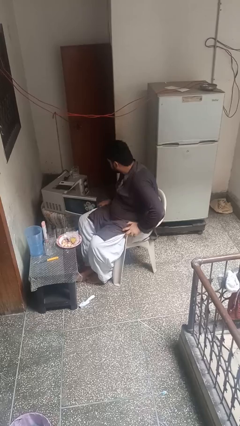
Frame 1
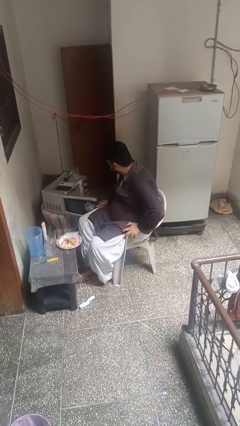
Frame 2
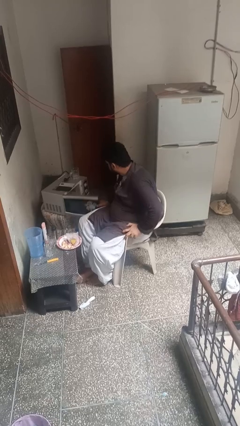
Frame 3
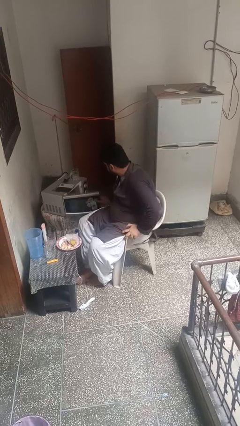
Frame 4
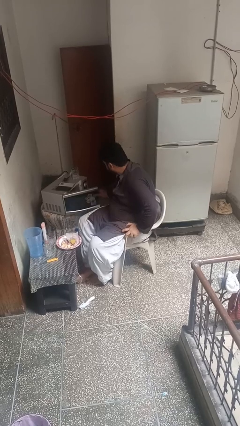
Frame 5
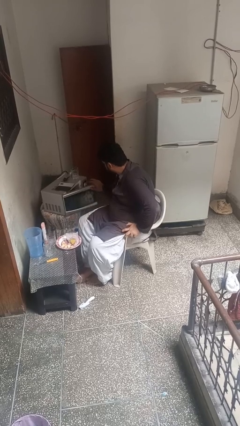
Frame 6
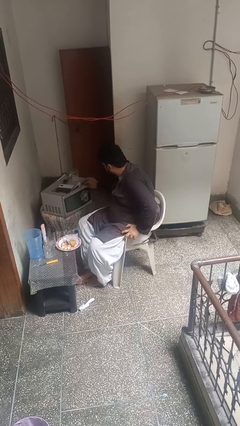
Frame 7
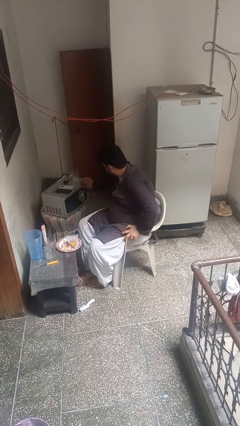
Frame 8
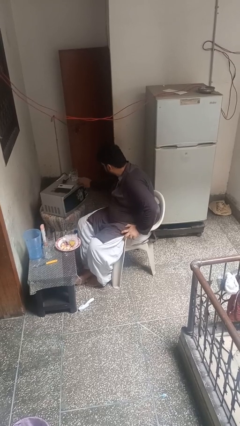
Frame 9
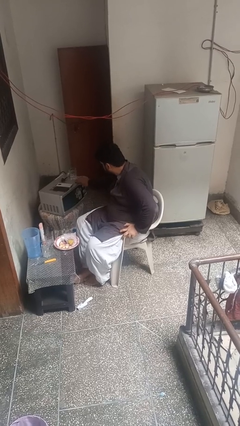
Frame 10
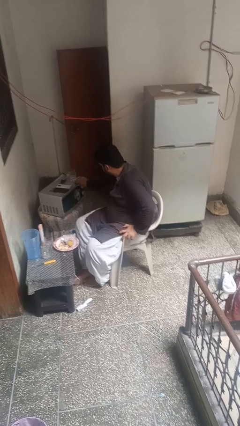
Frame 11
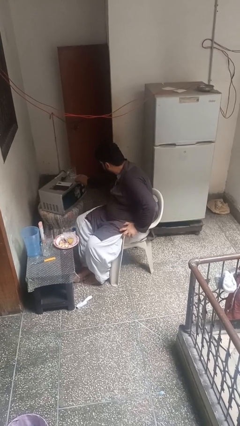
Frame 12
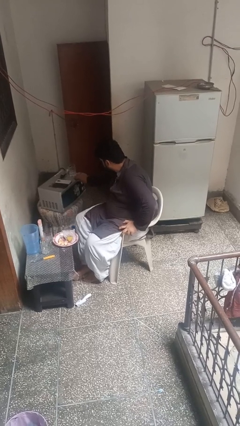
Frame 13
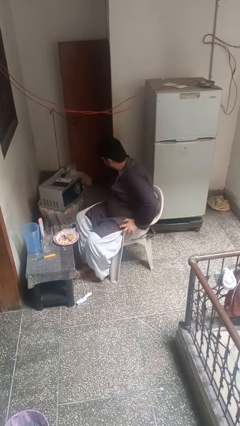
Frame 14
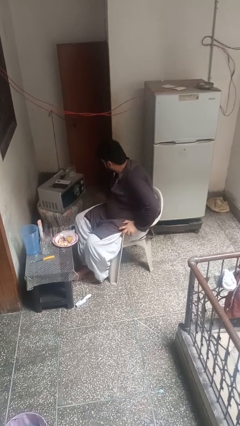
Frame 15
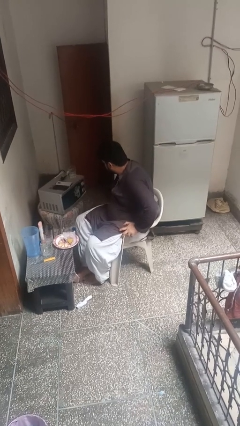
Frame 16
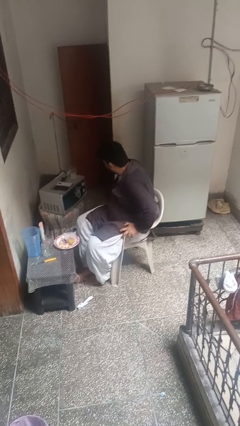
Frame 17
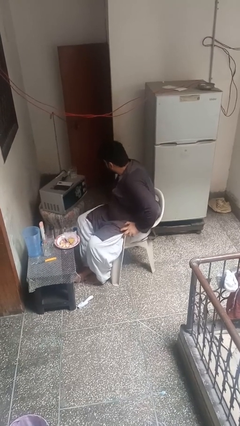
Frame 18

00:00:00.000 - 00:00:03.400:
person closes microwave

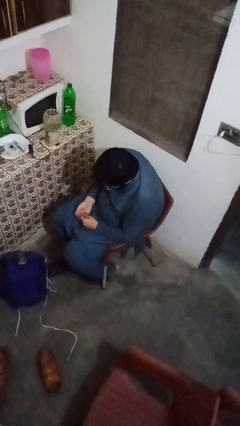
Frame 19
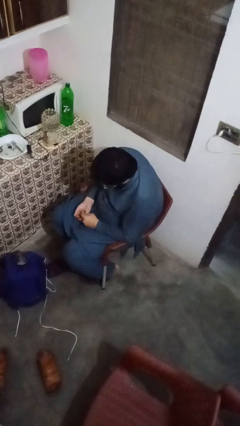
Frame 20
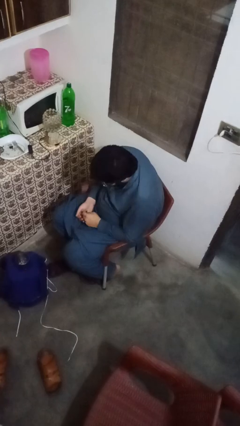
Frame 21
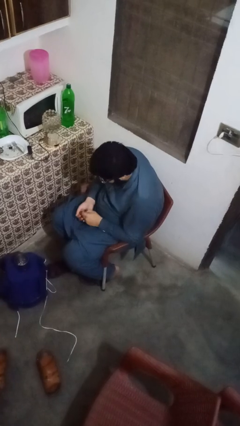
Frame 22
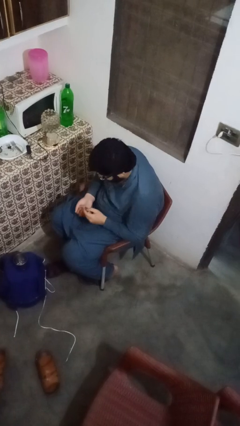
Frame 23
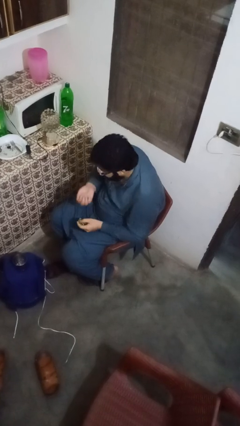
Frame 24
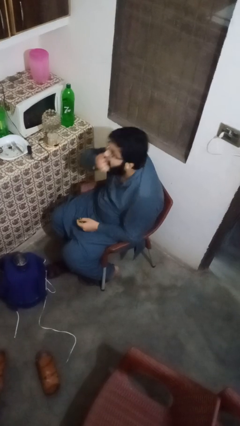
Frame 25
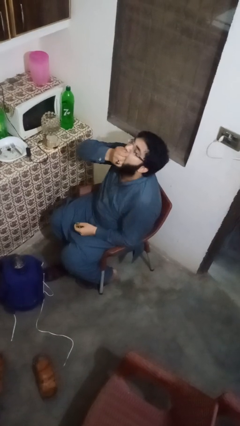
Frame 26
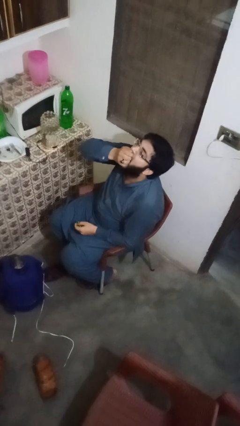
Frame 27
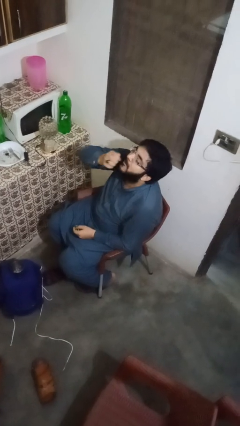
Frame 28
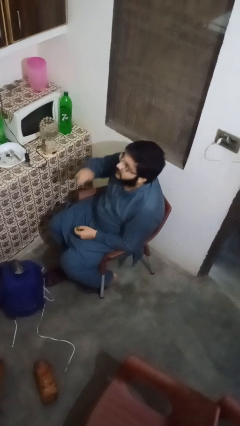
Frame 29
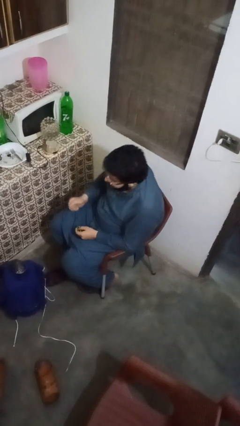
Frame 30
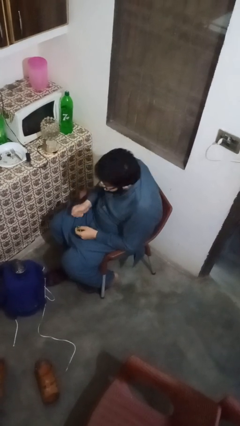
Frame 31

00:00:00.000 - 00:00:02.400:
person takes medicine pills

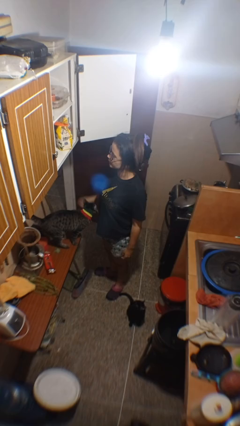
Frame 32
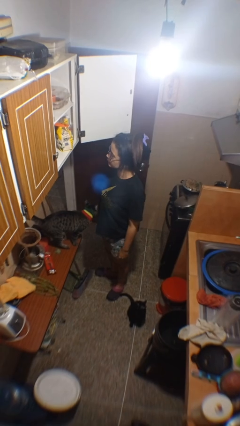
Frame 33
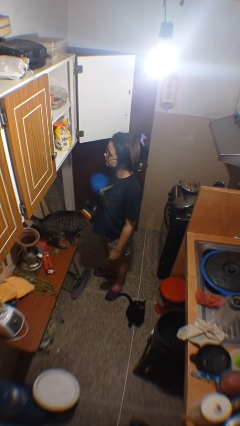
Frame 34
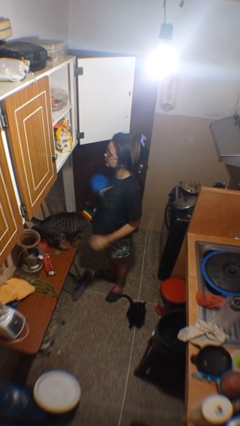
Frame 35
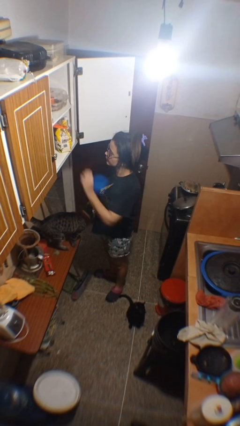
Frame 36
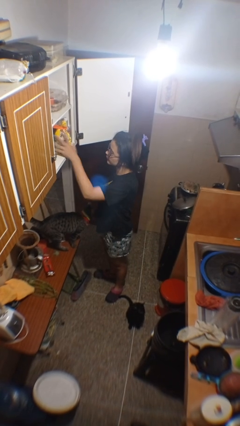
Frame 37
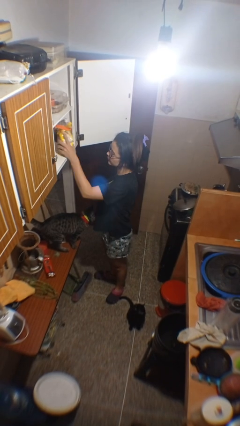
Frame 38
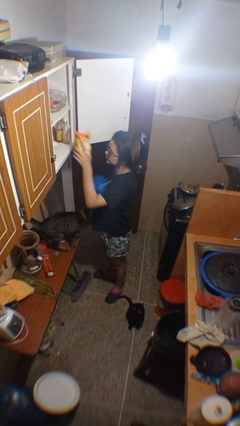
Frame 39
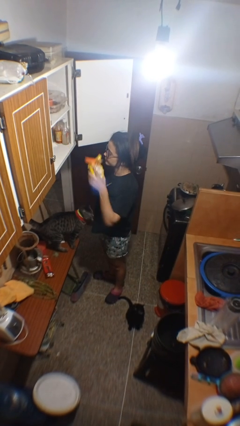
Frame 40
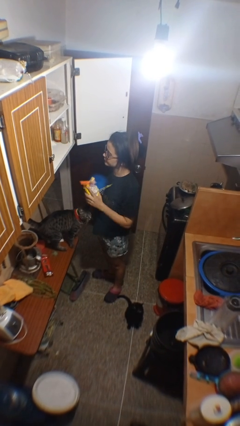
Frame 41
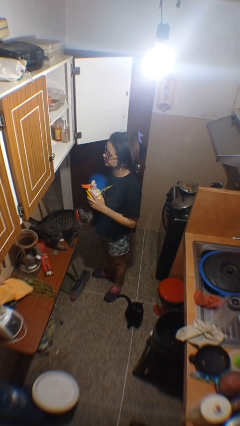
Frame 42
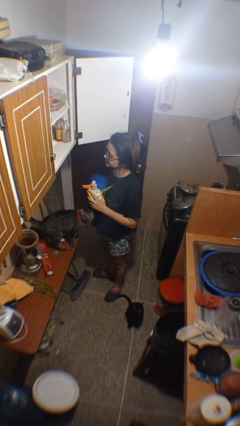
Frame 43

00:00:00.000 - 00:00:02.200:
person picks up object from cabinet

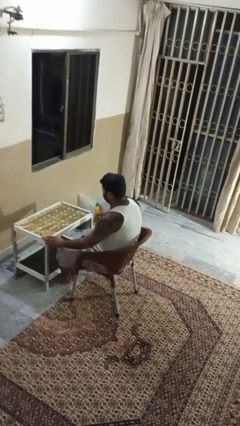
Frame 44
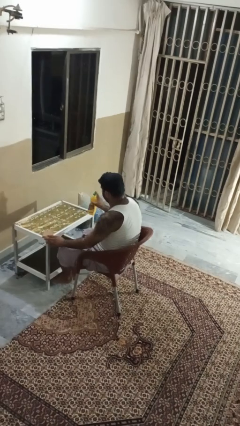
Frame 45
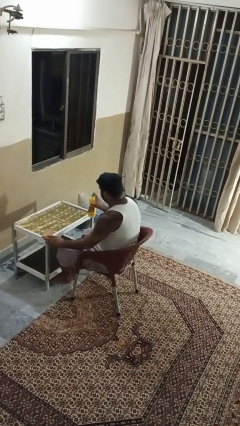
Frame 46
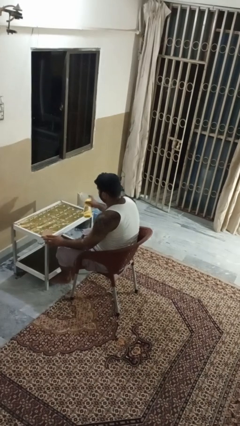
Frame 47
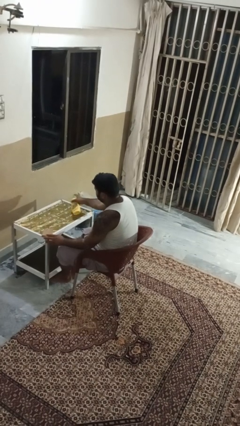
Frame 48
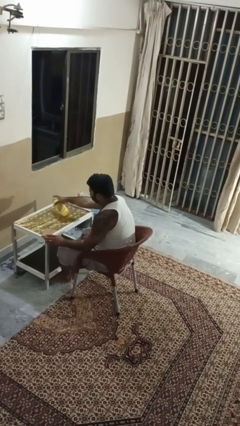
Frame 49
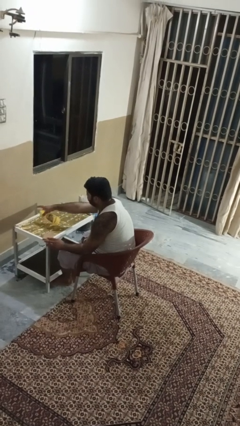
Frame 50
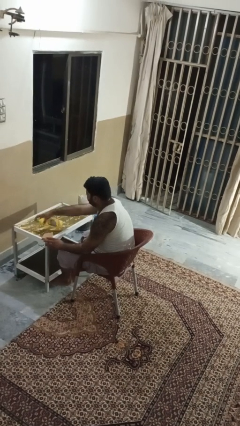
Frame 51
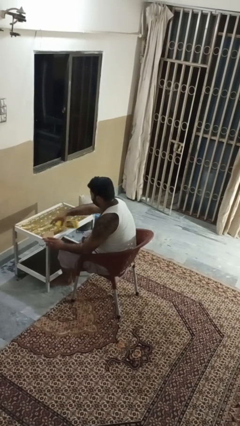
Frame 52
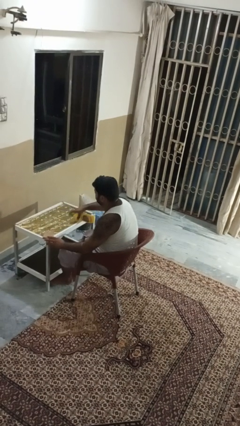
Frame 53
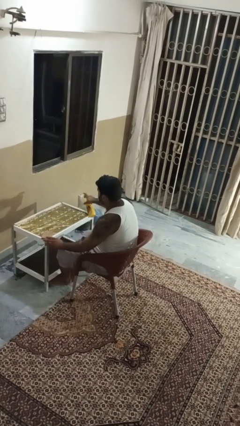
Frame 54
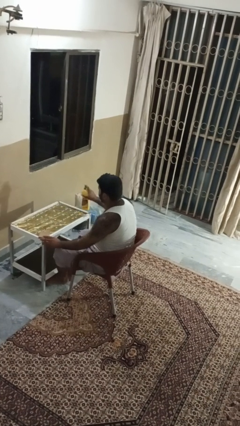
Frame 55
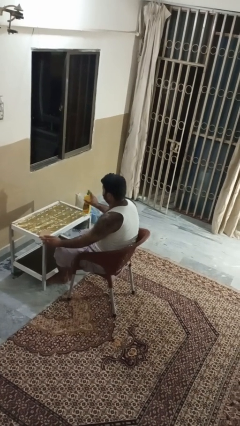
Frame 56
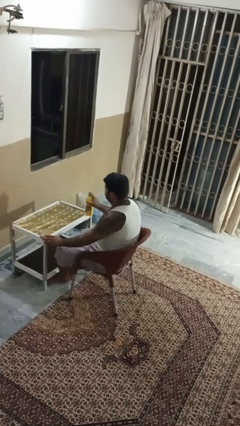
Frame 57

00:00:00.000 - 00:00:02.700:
person sprays from bottle

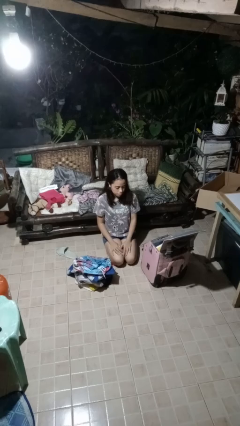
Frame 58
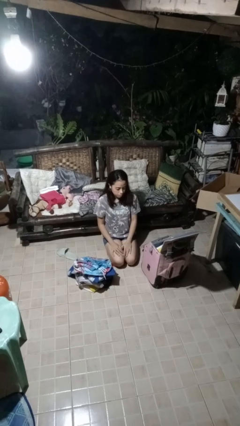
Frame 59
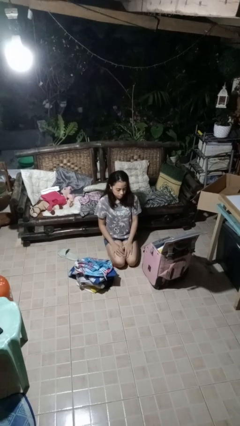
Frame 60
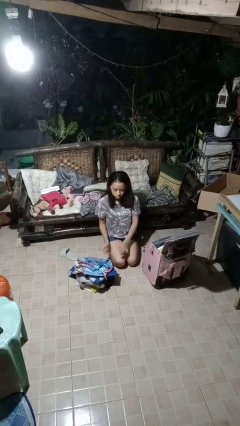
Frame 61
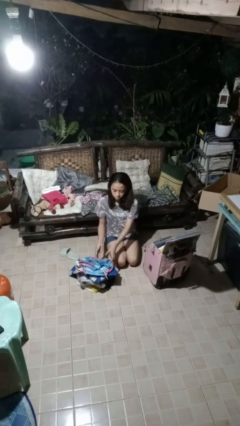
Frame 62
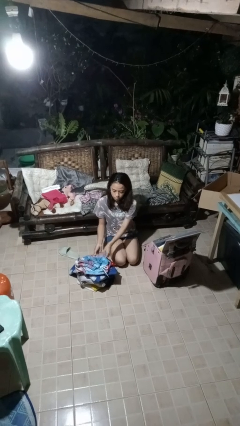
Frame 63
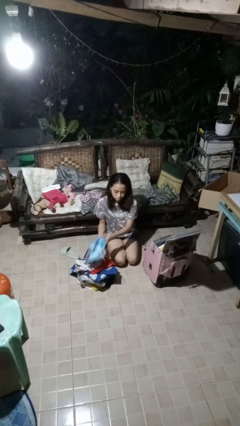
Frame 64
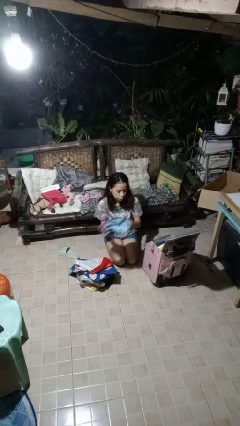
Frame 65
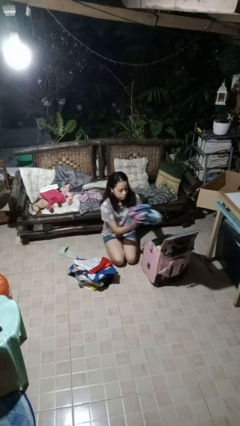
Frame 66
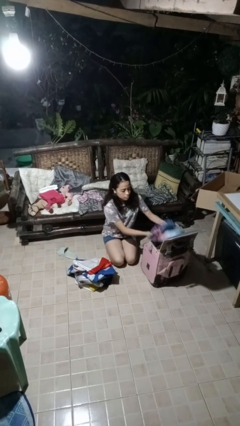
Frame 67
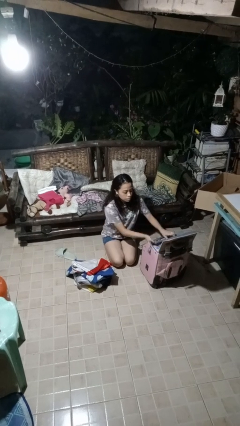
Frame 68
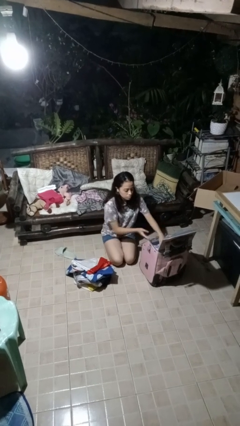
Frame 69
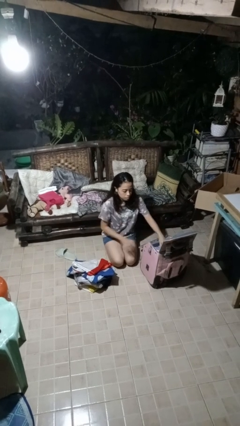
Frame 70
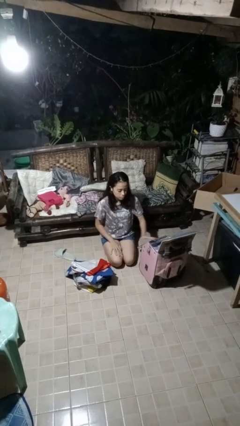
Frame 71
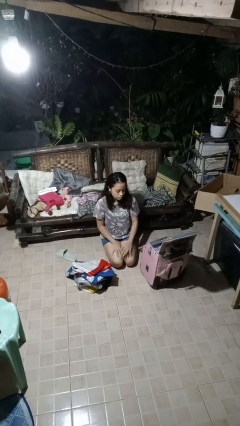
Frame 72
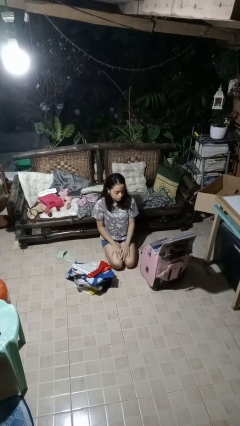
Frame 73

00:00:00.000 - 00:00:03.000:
person loads clothes into suitcase

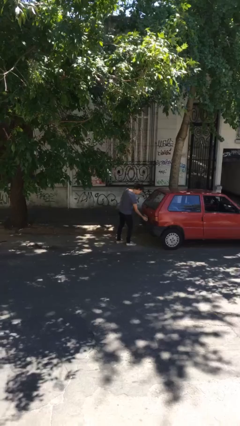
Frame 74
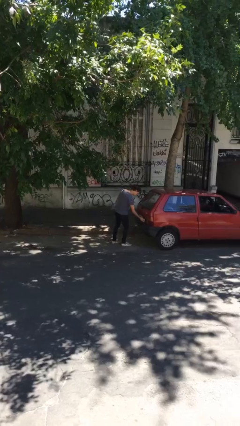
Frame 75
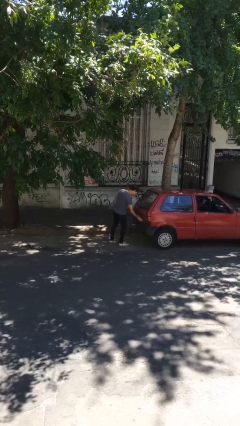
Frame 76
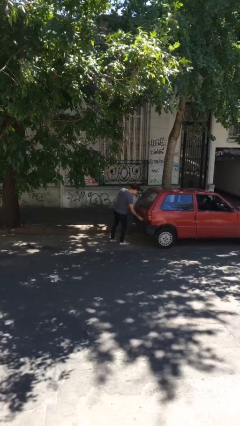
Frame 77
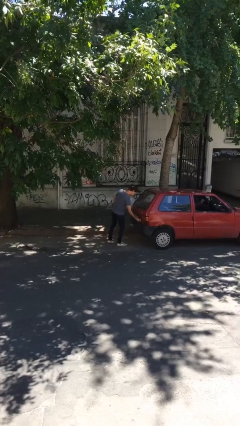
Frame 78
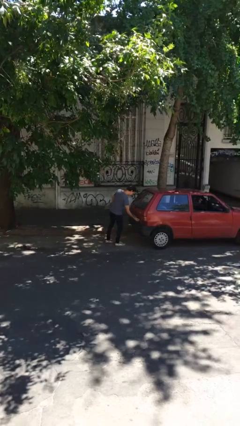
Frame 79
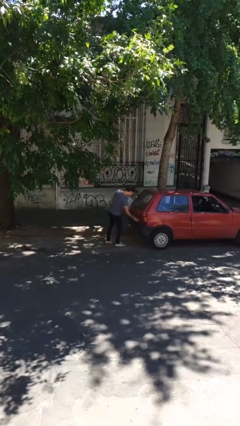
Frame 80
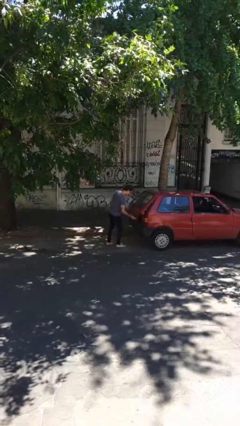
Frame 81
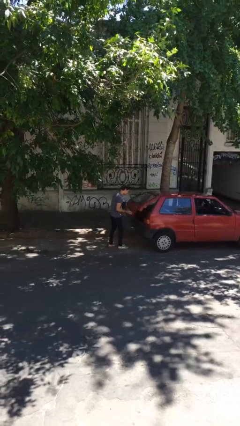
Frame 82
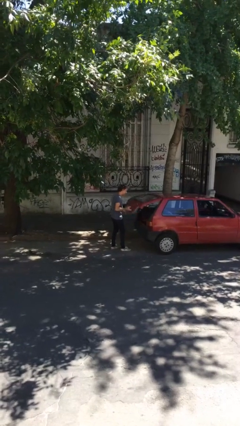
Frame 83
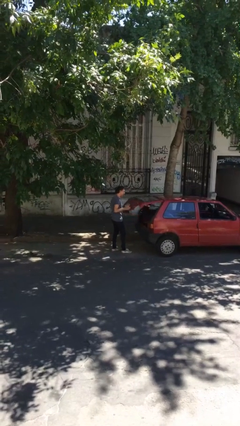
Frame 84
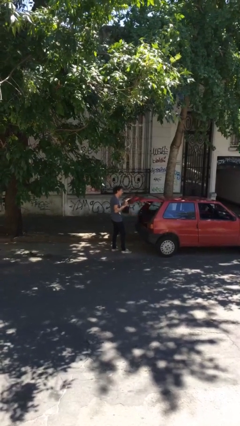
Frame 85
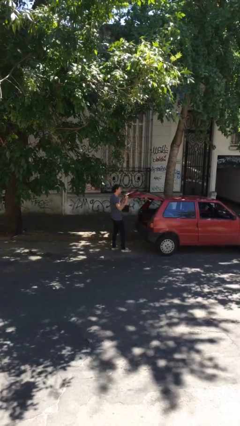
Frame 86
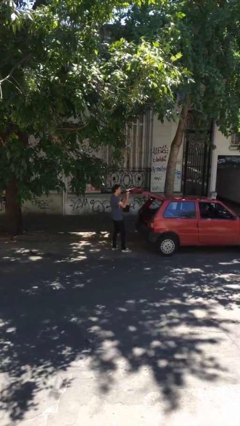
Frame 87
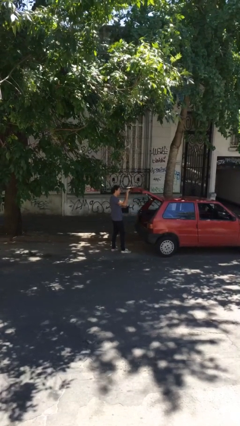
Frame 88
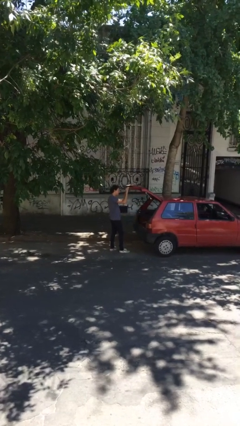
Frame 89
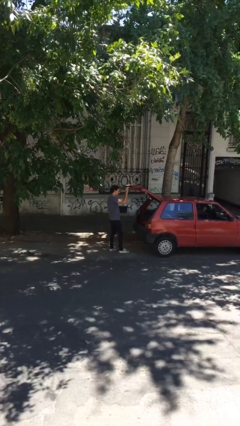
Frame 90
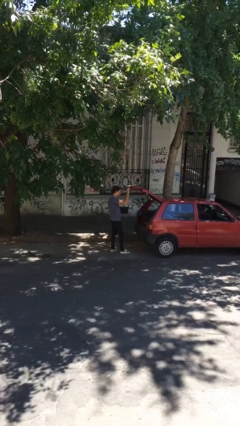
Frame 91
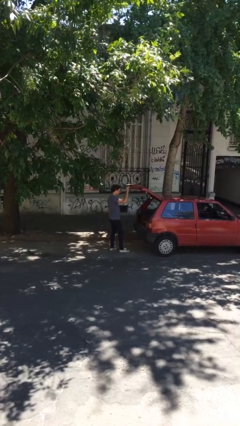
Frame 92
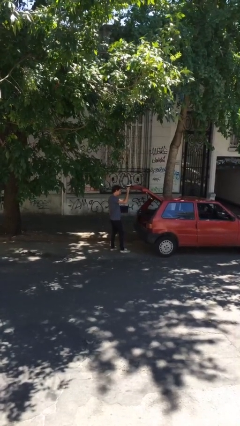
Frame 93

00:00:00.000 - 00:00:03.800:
person opens car trunk
